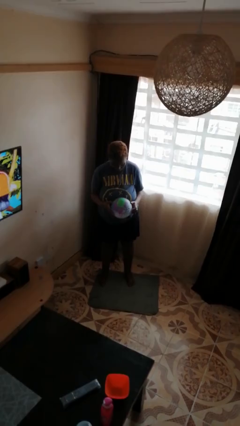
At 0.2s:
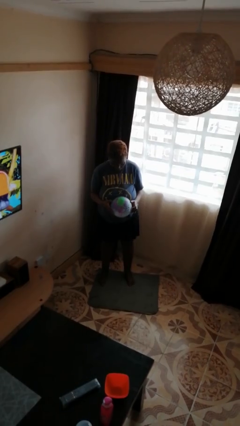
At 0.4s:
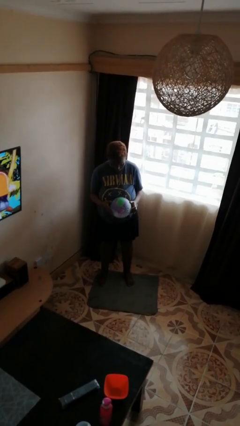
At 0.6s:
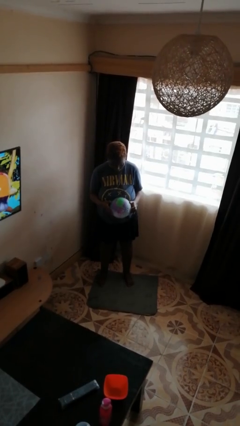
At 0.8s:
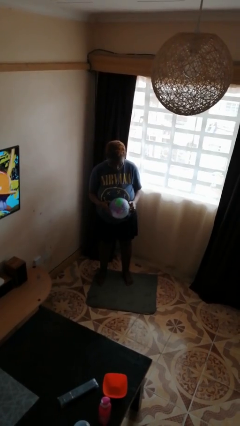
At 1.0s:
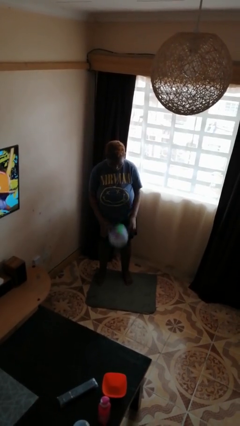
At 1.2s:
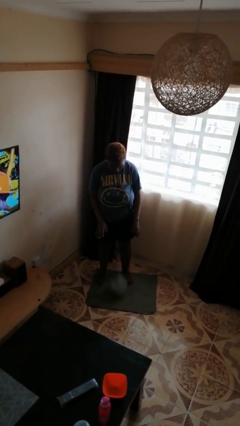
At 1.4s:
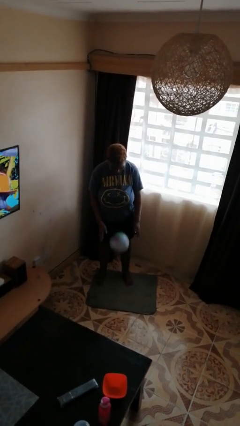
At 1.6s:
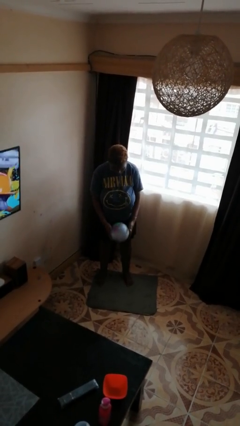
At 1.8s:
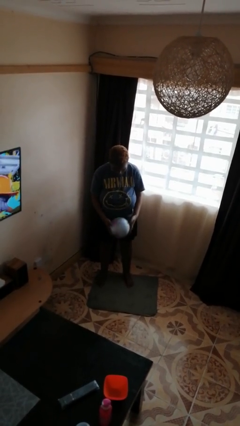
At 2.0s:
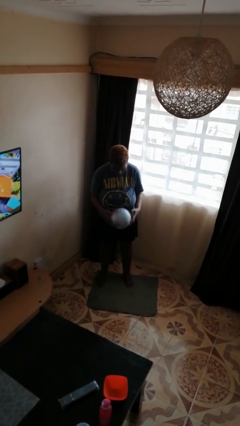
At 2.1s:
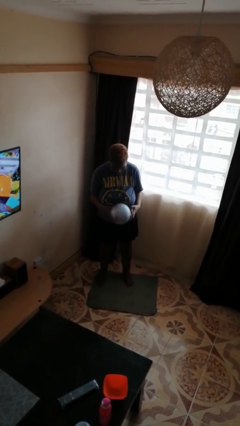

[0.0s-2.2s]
person bounces ball on floor

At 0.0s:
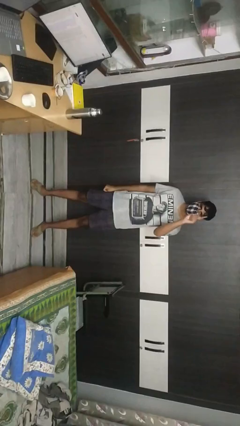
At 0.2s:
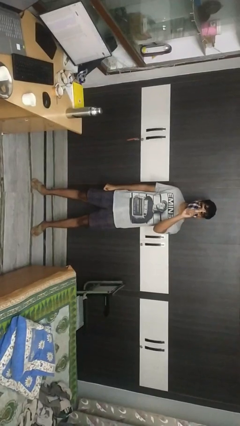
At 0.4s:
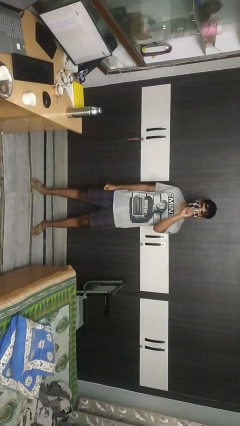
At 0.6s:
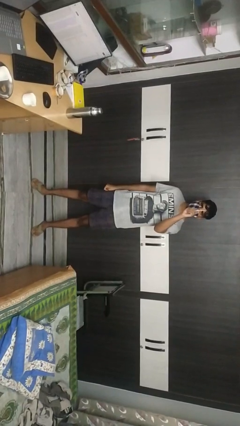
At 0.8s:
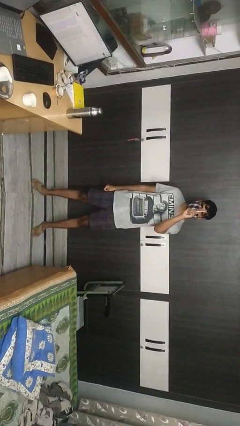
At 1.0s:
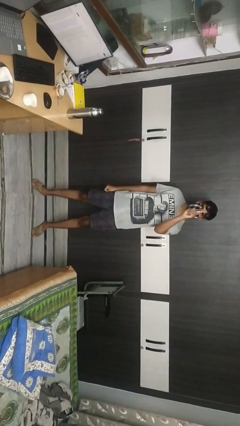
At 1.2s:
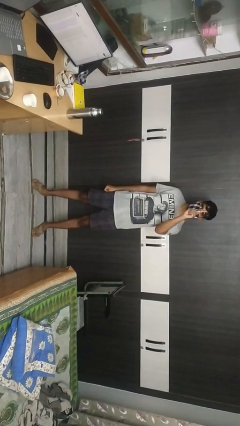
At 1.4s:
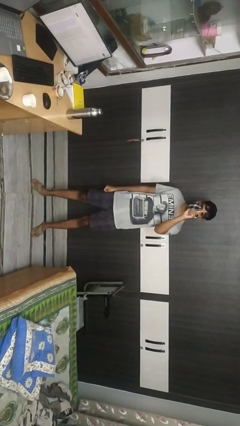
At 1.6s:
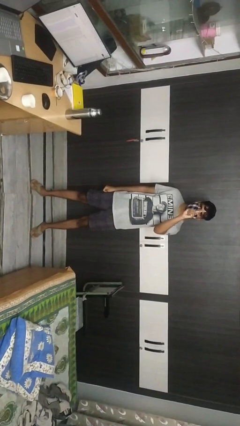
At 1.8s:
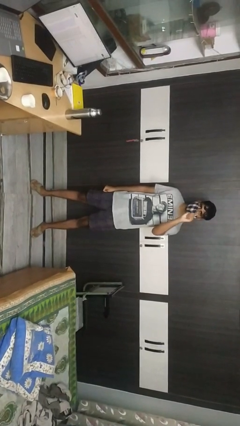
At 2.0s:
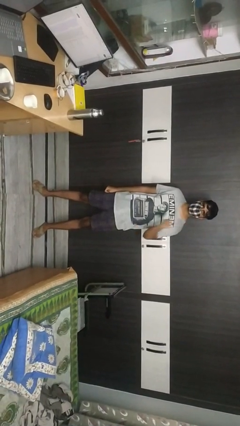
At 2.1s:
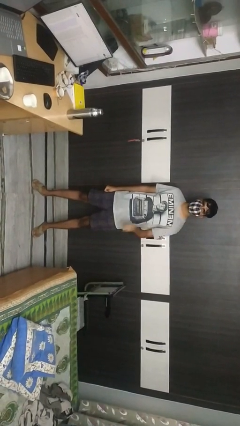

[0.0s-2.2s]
person gestures number one

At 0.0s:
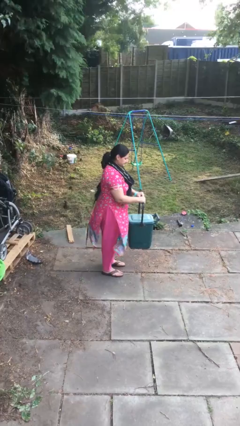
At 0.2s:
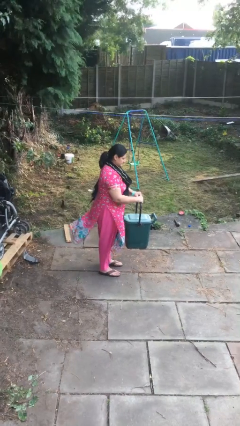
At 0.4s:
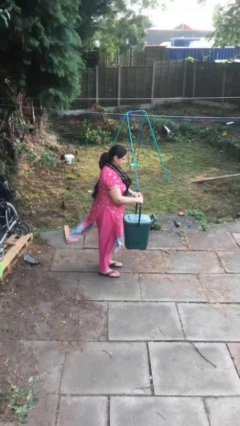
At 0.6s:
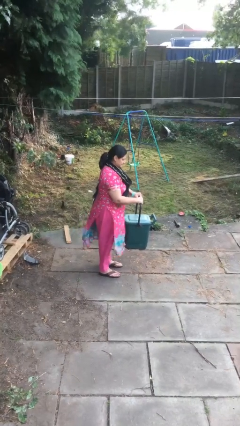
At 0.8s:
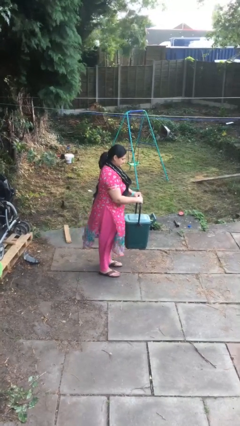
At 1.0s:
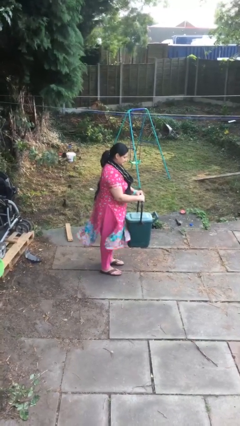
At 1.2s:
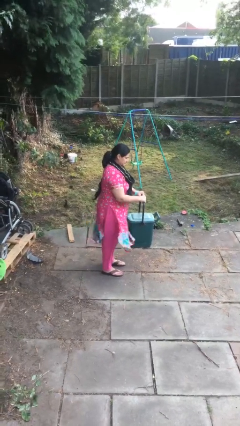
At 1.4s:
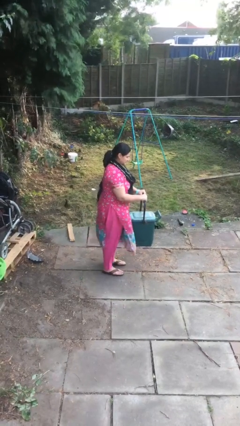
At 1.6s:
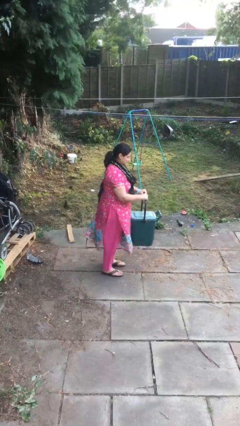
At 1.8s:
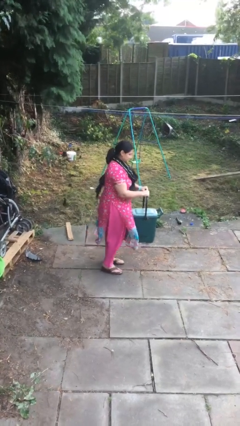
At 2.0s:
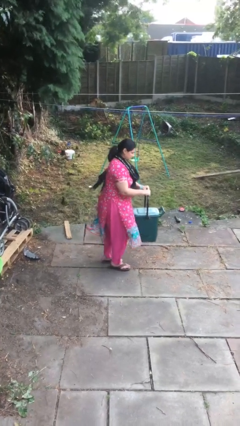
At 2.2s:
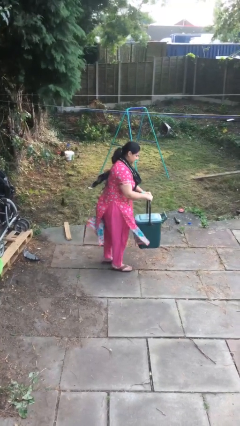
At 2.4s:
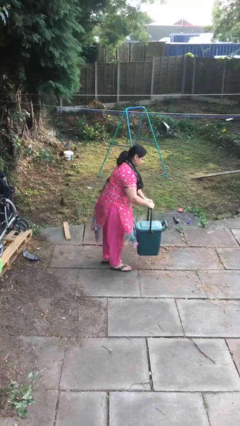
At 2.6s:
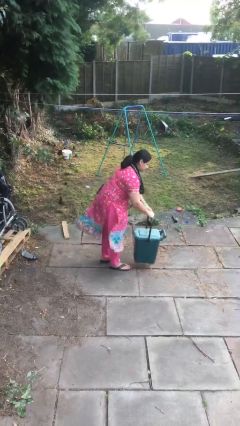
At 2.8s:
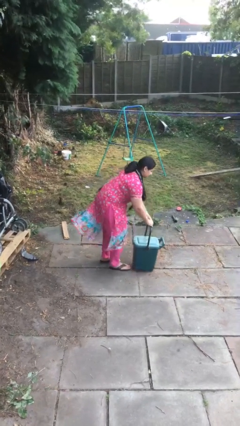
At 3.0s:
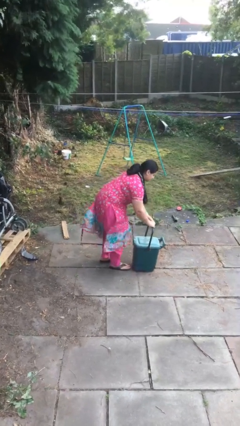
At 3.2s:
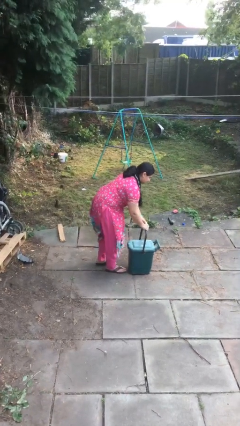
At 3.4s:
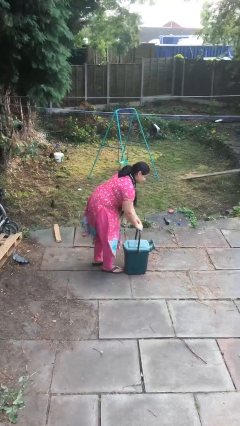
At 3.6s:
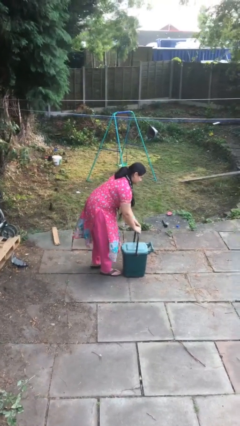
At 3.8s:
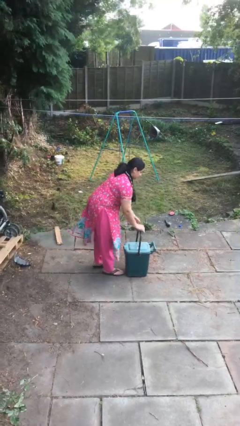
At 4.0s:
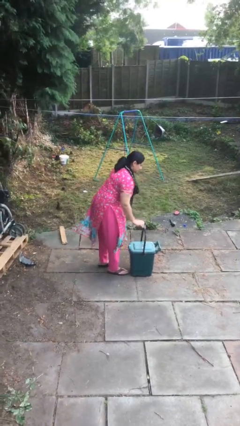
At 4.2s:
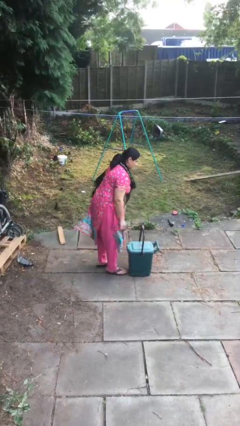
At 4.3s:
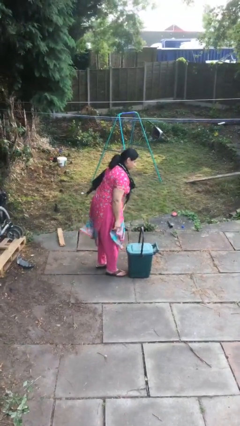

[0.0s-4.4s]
person puts down object on floor

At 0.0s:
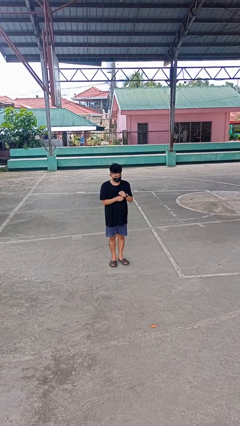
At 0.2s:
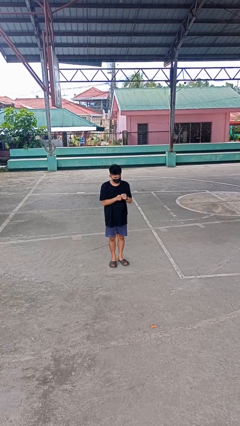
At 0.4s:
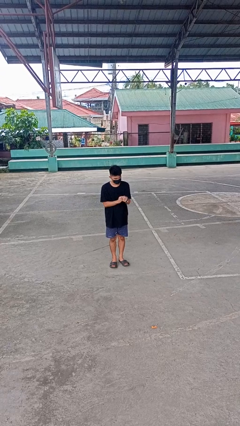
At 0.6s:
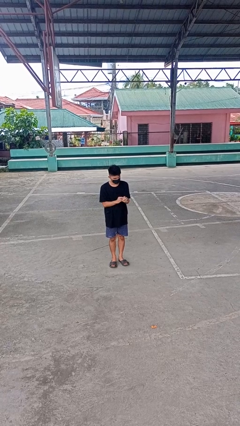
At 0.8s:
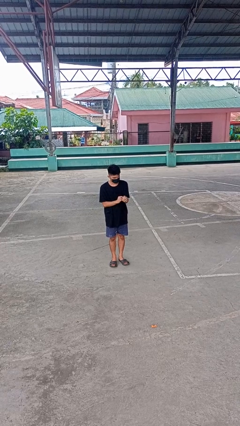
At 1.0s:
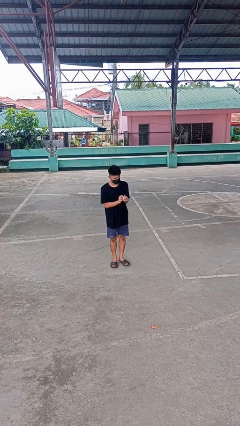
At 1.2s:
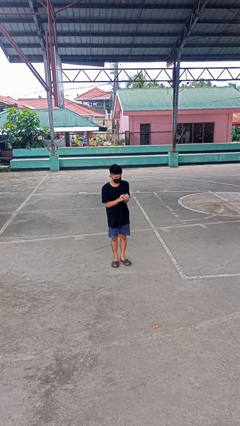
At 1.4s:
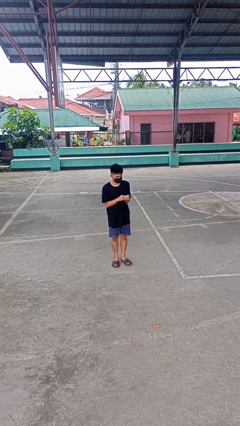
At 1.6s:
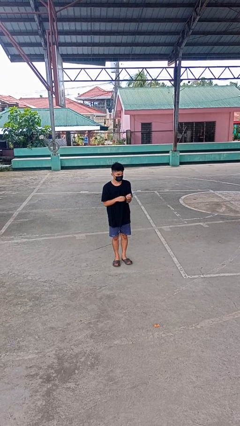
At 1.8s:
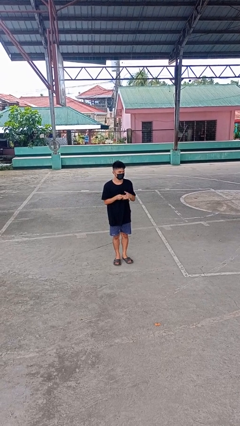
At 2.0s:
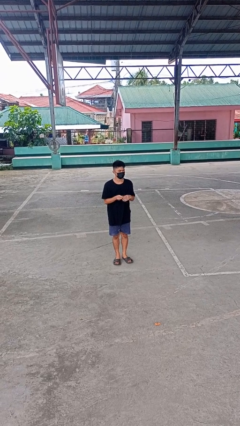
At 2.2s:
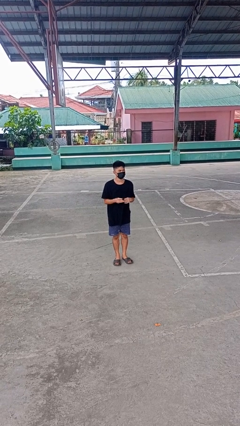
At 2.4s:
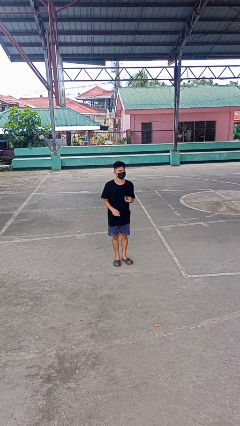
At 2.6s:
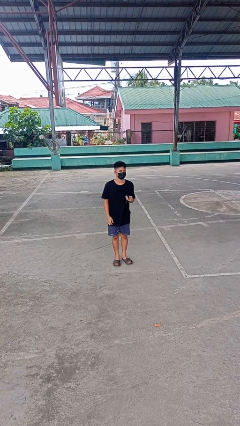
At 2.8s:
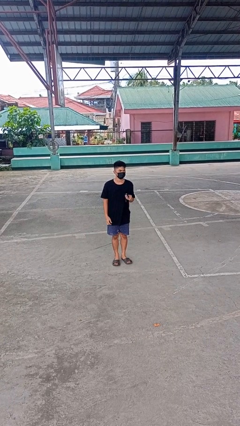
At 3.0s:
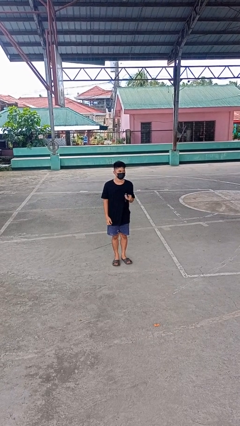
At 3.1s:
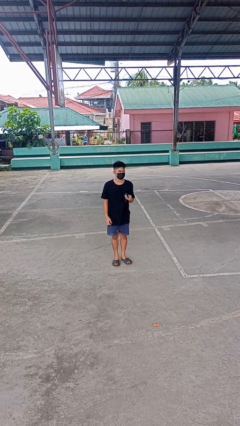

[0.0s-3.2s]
person takes off wristwatch

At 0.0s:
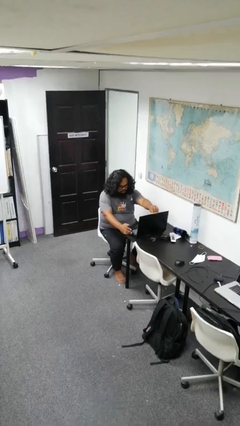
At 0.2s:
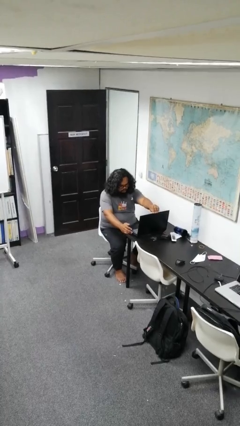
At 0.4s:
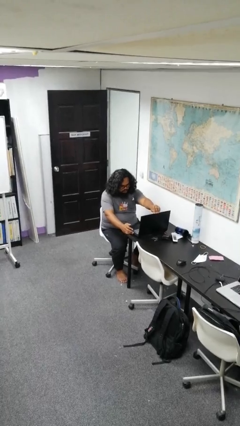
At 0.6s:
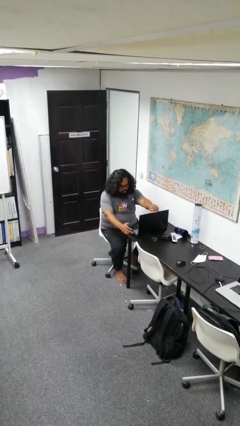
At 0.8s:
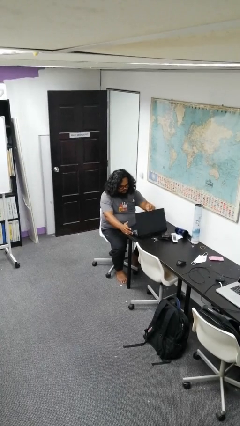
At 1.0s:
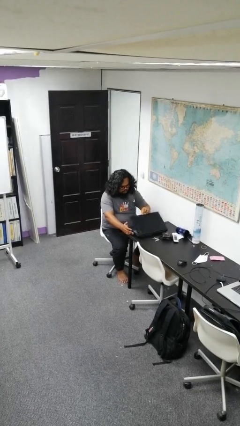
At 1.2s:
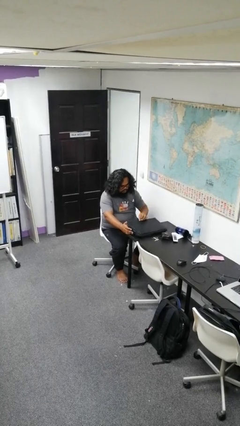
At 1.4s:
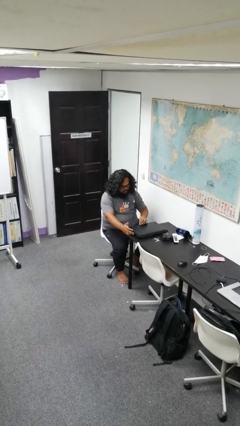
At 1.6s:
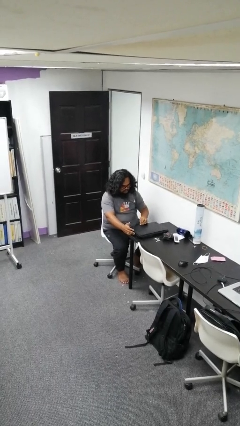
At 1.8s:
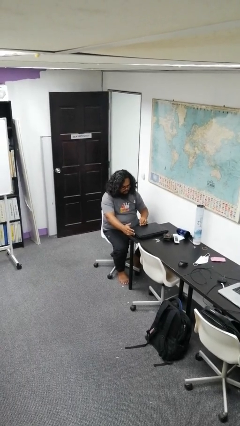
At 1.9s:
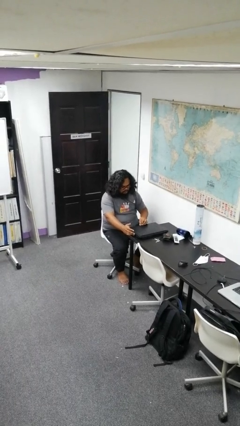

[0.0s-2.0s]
person closes laptop

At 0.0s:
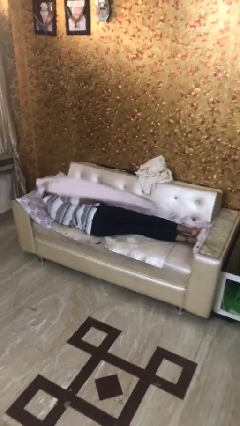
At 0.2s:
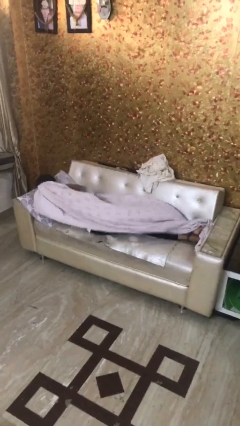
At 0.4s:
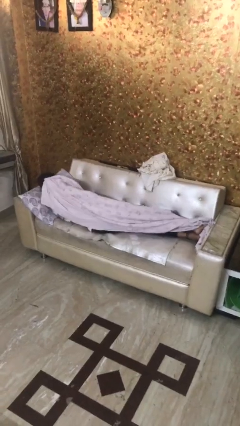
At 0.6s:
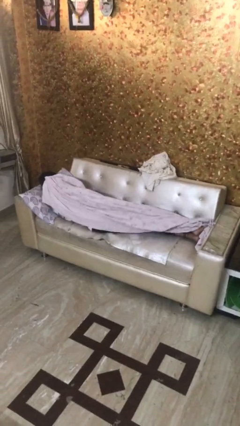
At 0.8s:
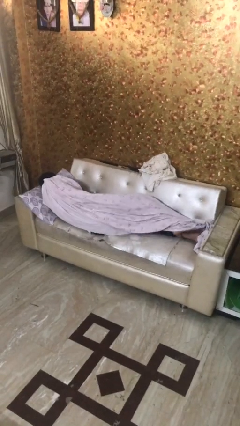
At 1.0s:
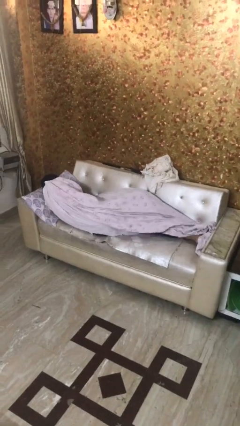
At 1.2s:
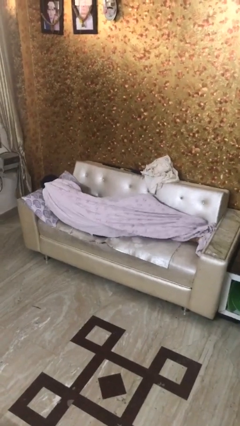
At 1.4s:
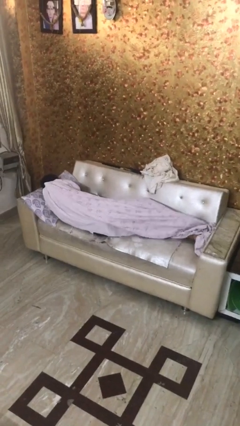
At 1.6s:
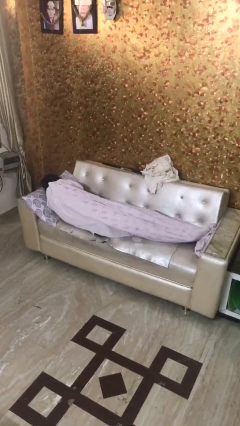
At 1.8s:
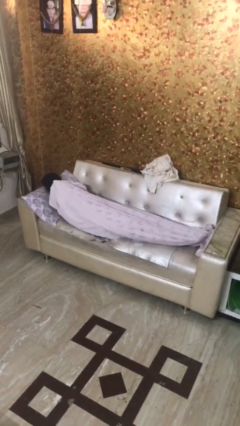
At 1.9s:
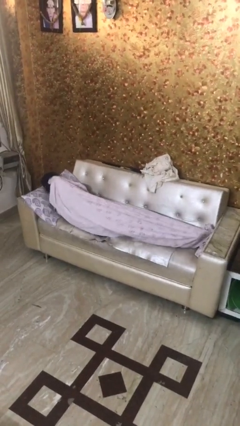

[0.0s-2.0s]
person covers with bedsheets

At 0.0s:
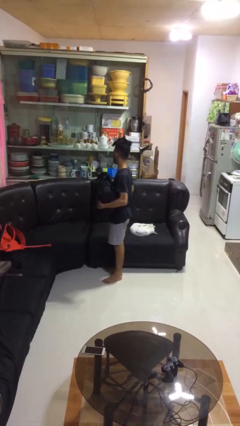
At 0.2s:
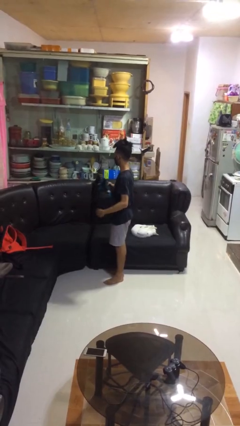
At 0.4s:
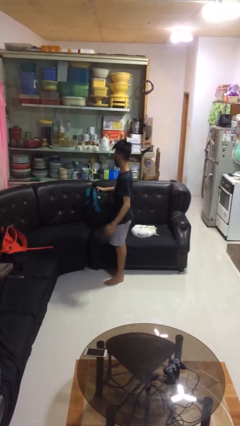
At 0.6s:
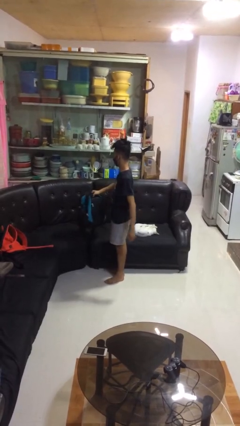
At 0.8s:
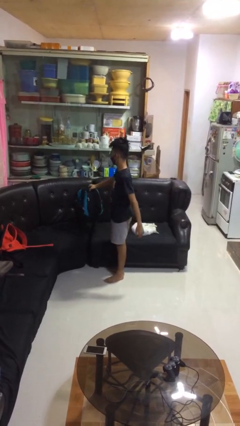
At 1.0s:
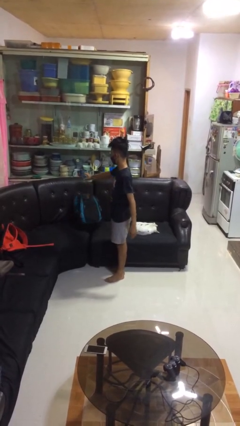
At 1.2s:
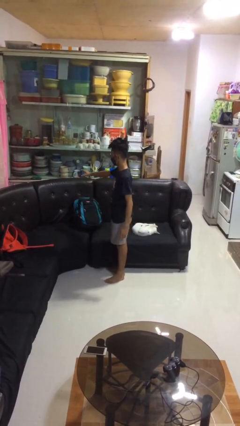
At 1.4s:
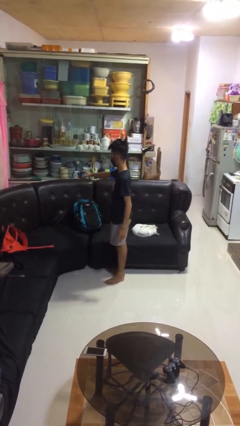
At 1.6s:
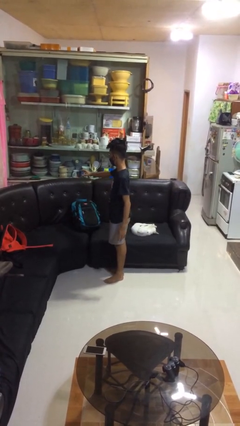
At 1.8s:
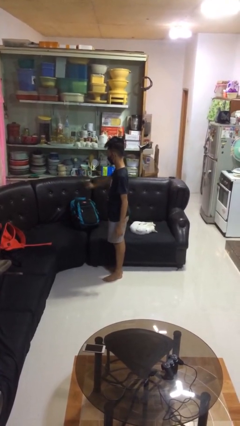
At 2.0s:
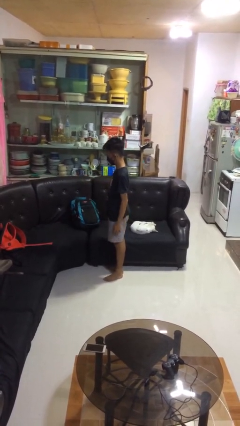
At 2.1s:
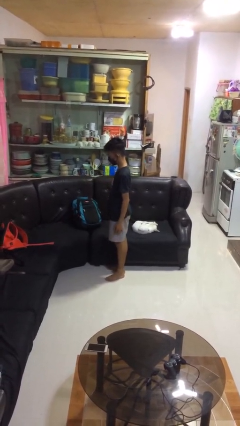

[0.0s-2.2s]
person puts down object on couch
